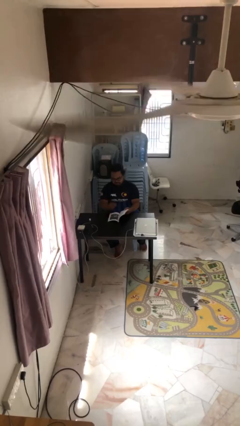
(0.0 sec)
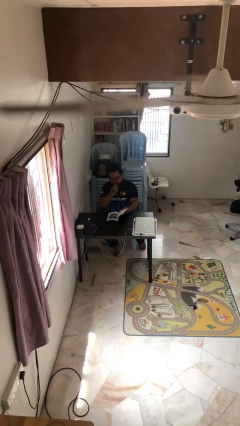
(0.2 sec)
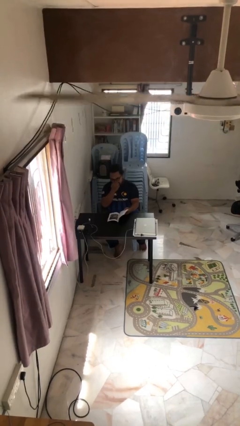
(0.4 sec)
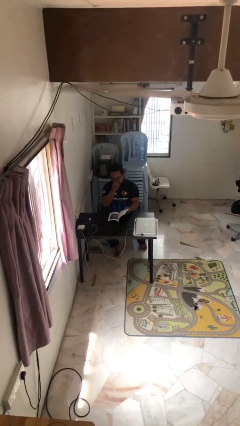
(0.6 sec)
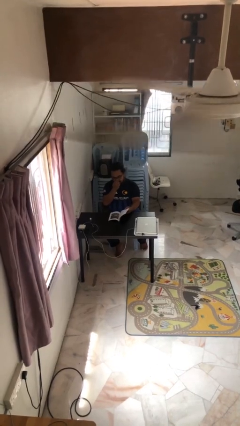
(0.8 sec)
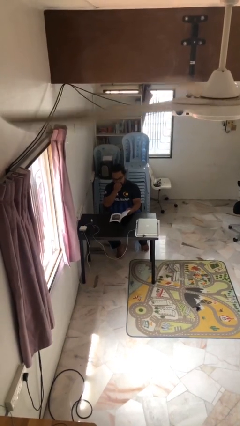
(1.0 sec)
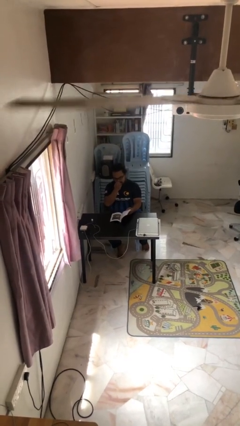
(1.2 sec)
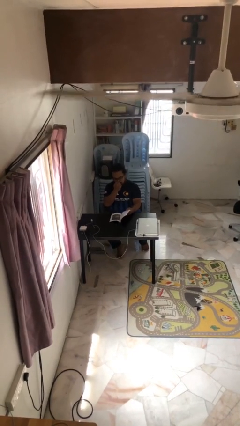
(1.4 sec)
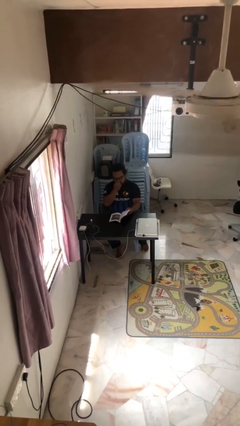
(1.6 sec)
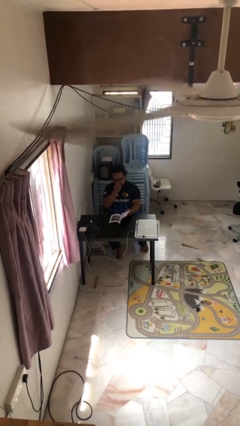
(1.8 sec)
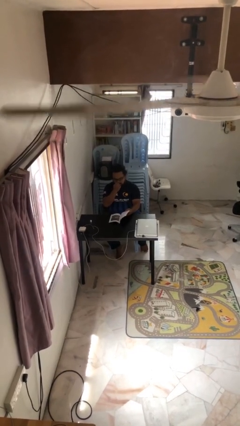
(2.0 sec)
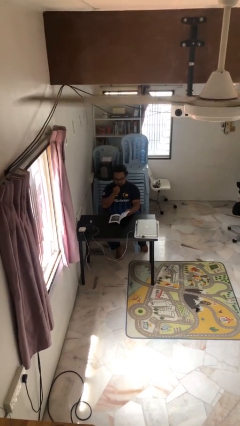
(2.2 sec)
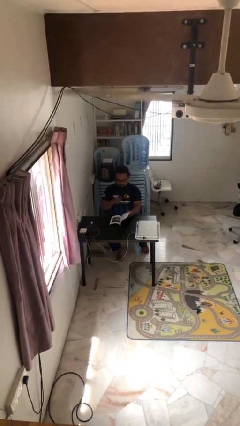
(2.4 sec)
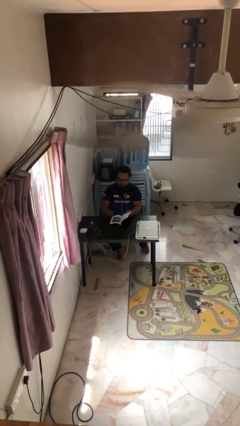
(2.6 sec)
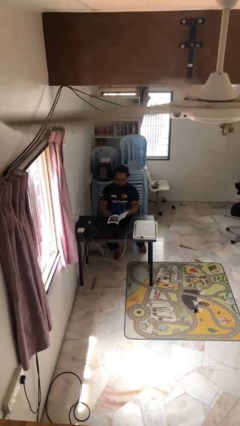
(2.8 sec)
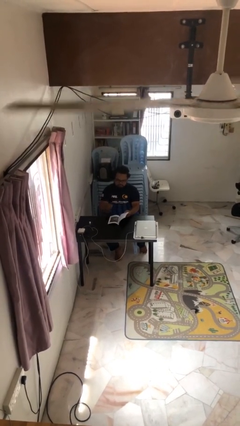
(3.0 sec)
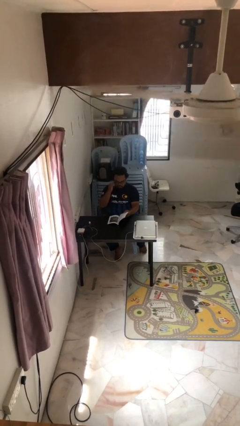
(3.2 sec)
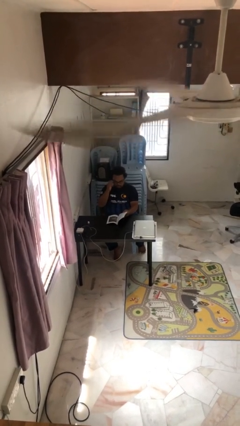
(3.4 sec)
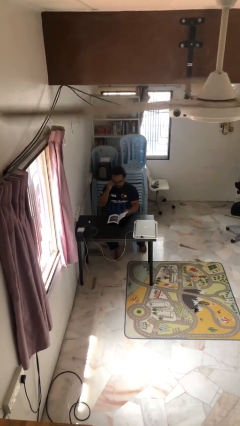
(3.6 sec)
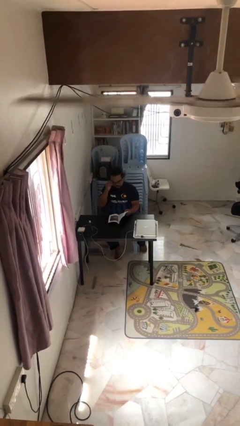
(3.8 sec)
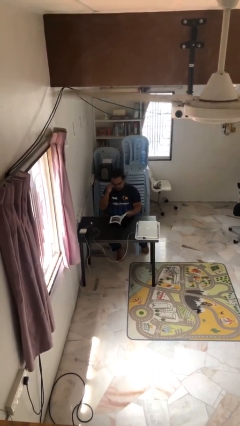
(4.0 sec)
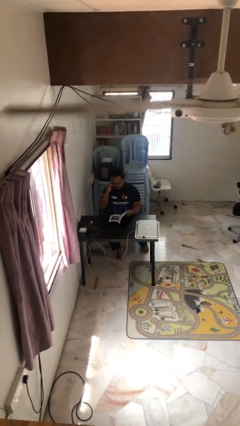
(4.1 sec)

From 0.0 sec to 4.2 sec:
person reads document

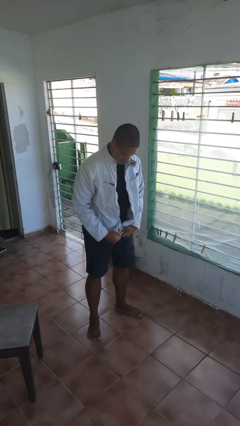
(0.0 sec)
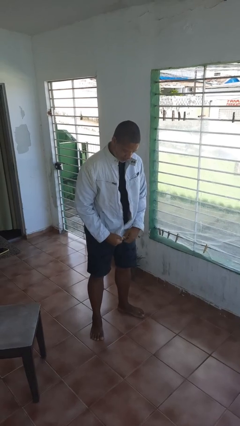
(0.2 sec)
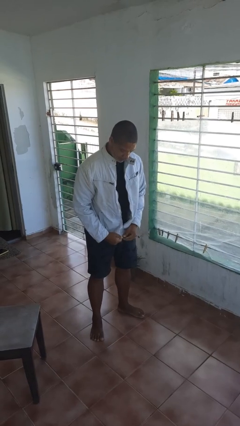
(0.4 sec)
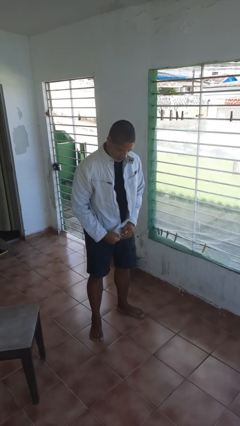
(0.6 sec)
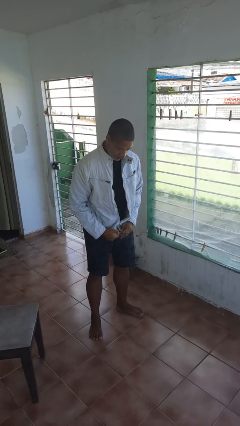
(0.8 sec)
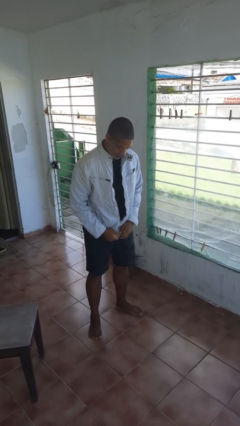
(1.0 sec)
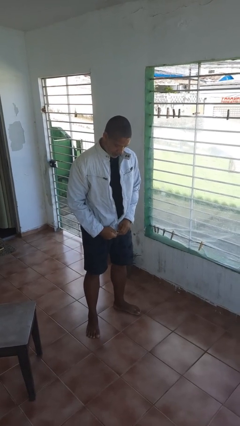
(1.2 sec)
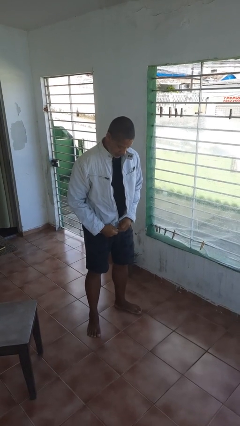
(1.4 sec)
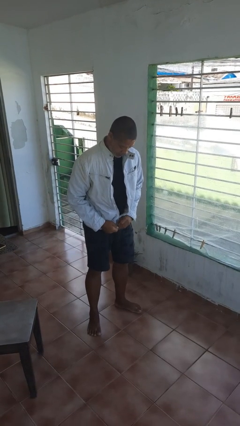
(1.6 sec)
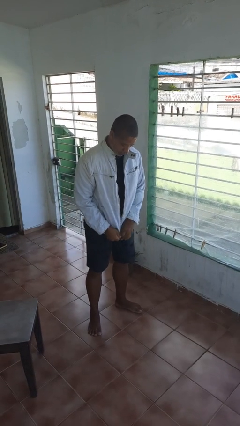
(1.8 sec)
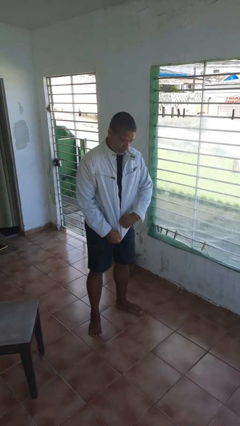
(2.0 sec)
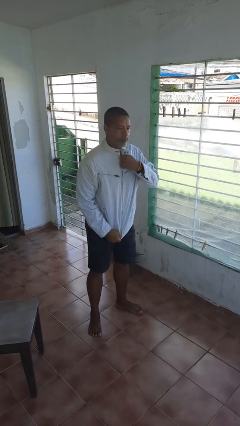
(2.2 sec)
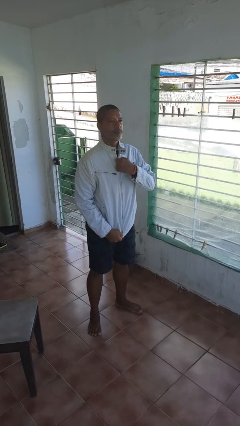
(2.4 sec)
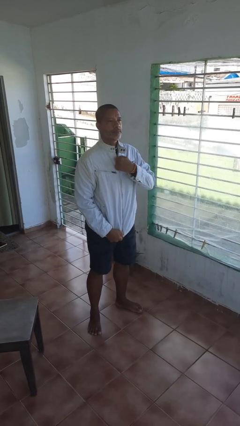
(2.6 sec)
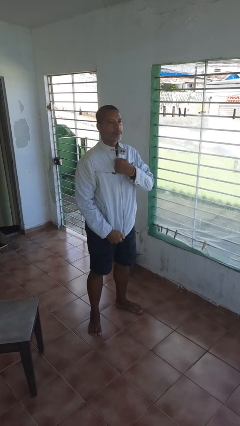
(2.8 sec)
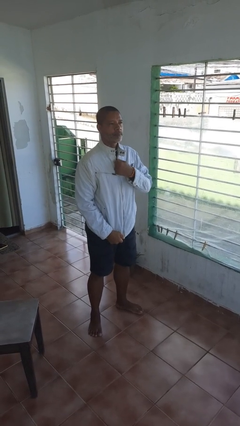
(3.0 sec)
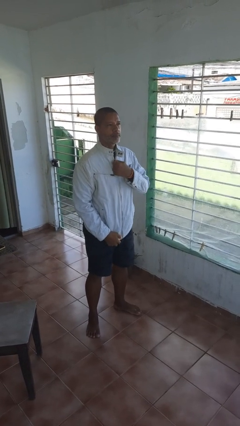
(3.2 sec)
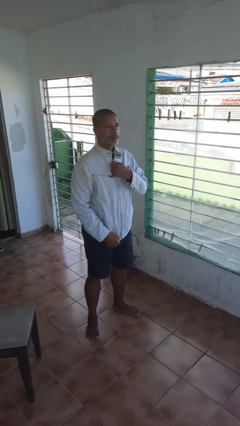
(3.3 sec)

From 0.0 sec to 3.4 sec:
person zips up jacket

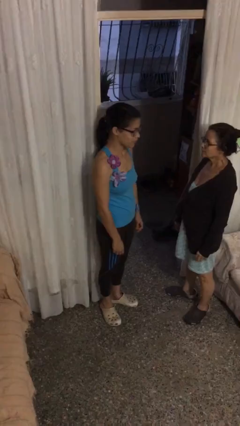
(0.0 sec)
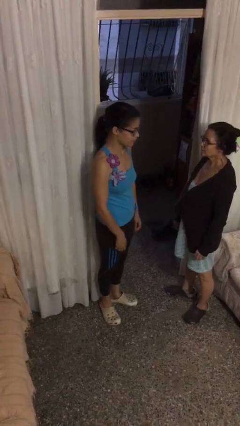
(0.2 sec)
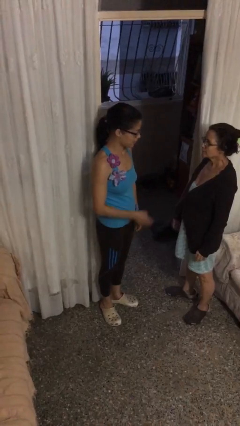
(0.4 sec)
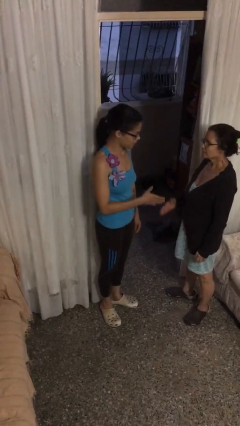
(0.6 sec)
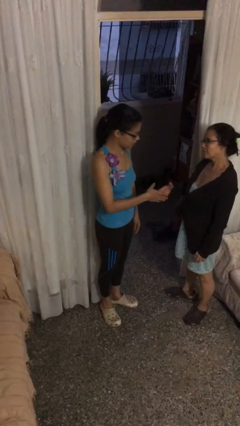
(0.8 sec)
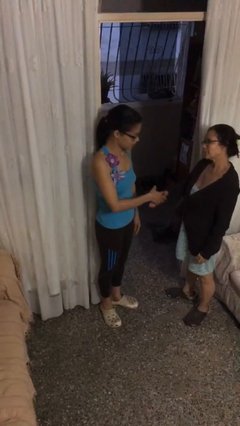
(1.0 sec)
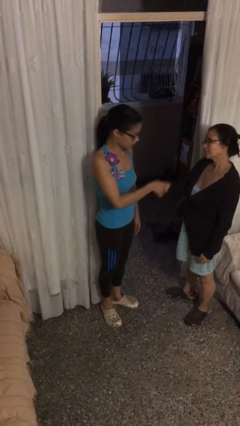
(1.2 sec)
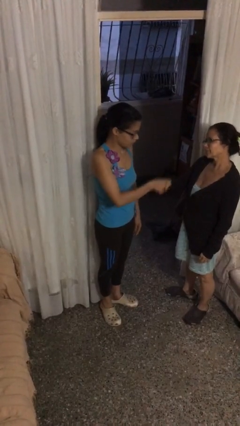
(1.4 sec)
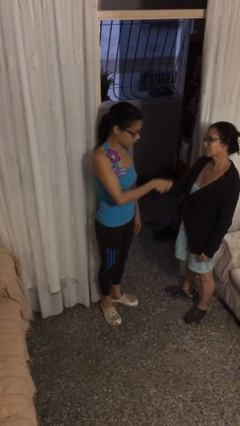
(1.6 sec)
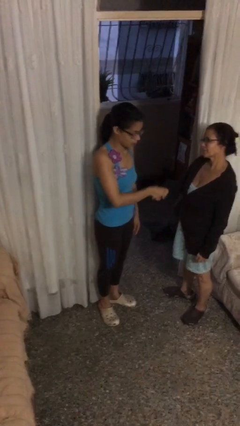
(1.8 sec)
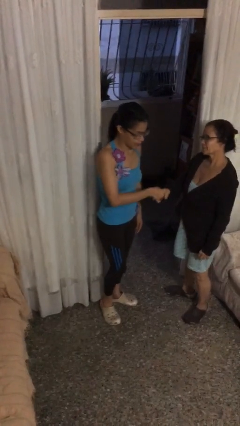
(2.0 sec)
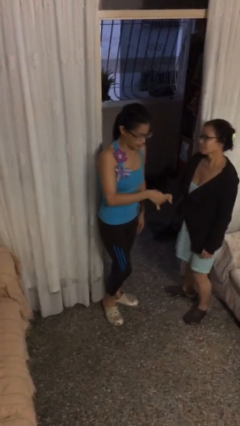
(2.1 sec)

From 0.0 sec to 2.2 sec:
person shakes hand

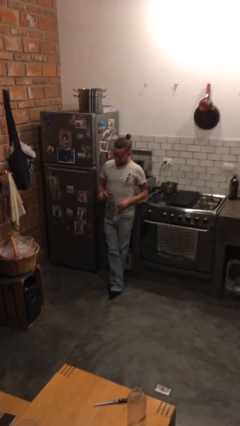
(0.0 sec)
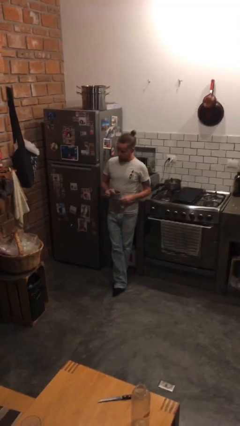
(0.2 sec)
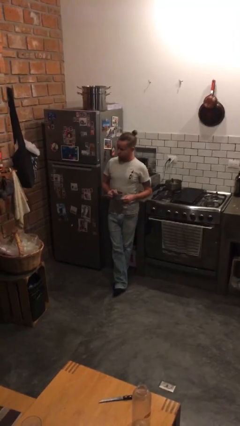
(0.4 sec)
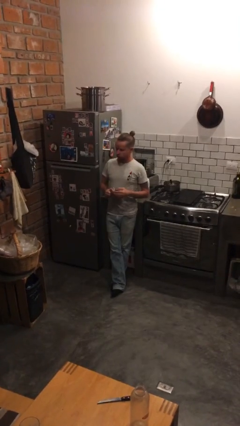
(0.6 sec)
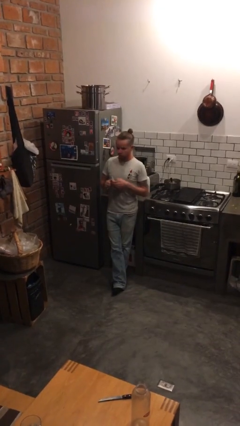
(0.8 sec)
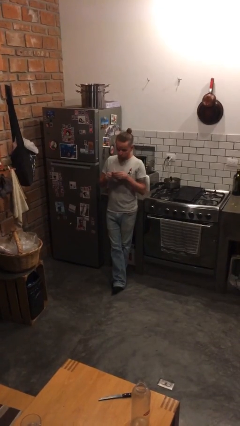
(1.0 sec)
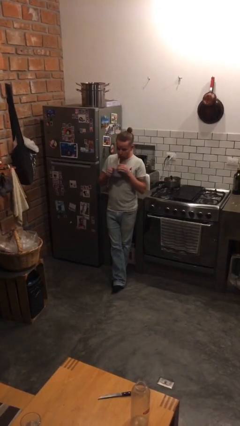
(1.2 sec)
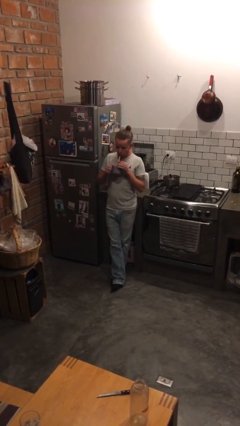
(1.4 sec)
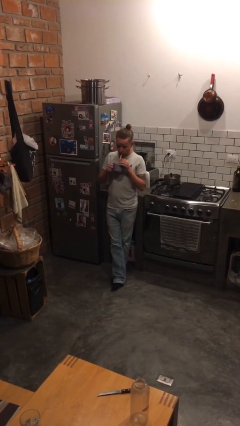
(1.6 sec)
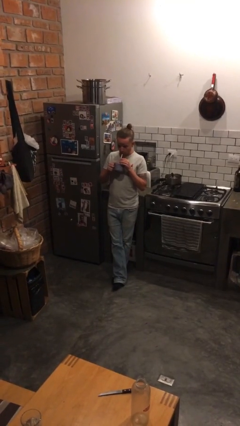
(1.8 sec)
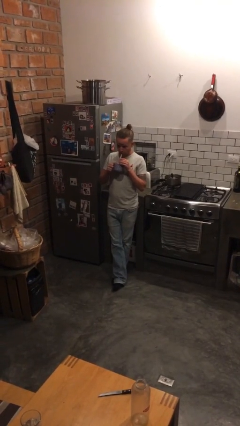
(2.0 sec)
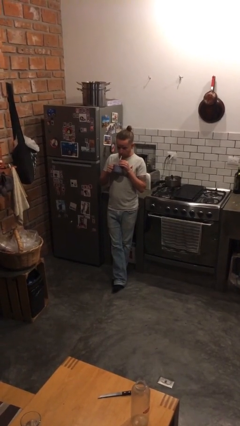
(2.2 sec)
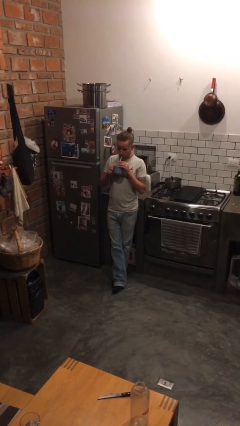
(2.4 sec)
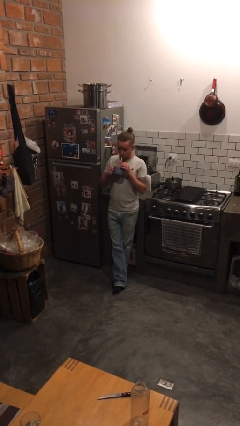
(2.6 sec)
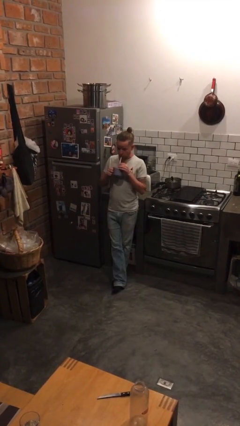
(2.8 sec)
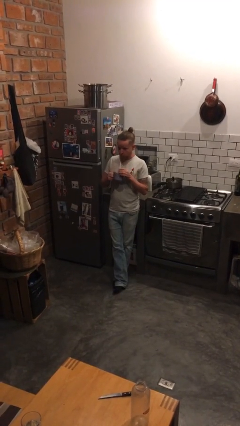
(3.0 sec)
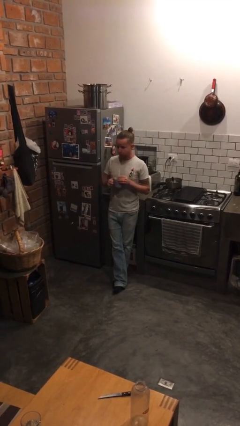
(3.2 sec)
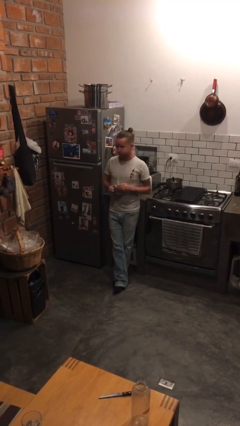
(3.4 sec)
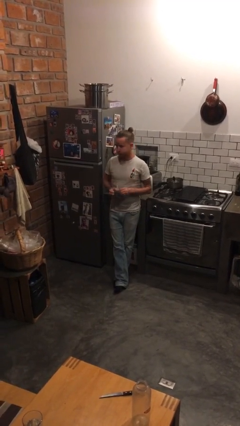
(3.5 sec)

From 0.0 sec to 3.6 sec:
person drinks from straw

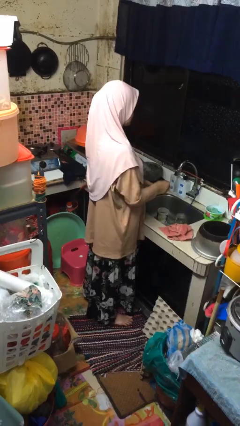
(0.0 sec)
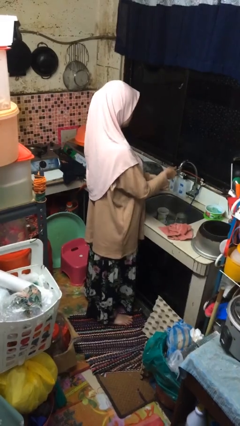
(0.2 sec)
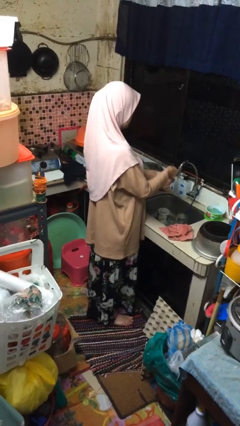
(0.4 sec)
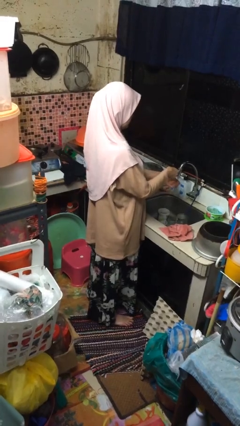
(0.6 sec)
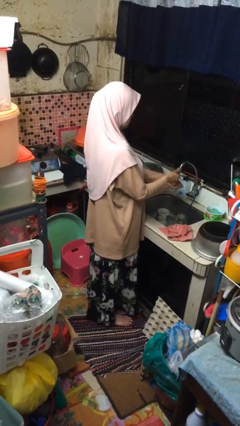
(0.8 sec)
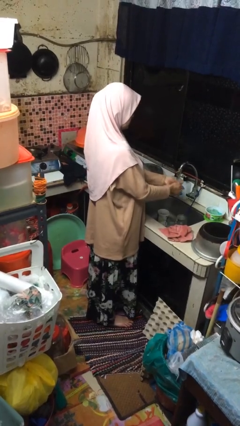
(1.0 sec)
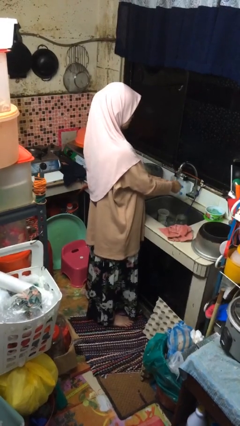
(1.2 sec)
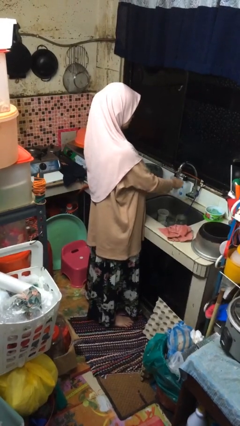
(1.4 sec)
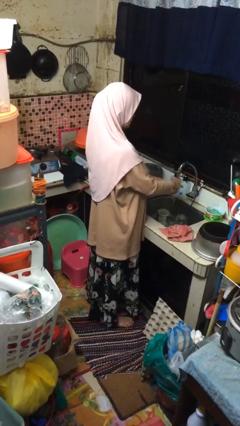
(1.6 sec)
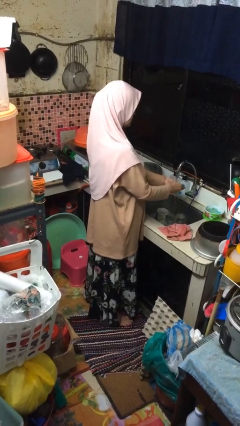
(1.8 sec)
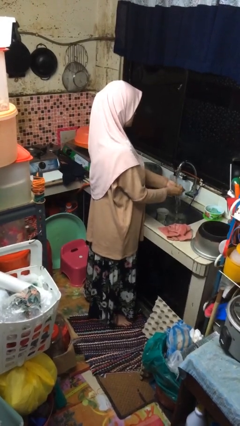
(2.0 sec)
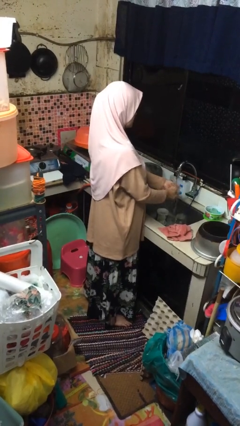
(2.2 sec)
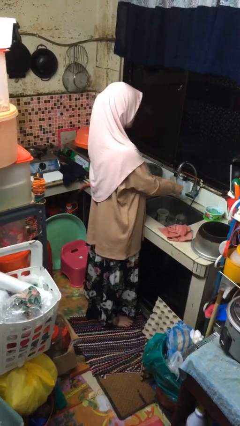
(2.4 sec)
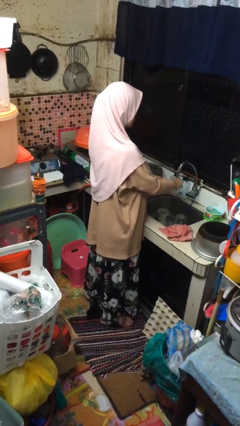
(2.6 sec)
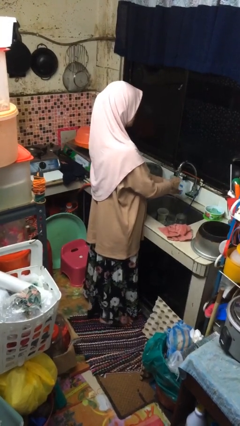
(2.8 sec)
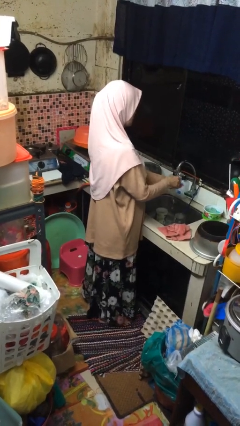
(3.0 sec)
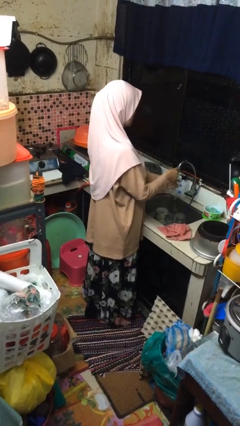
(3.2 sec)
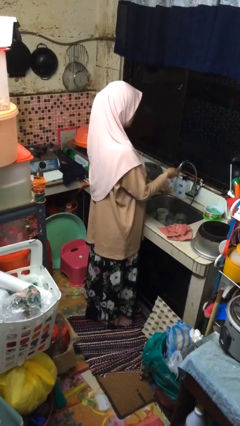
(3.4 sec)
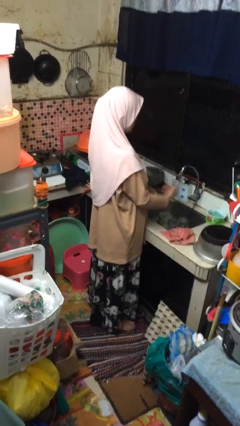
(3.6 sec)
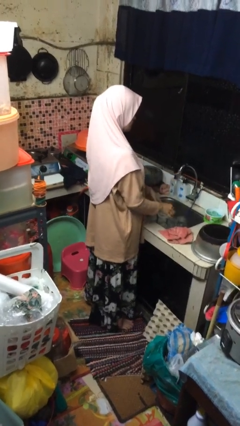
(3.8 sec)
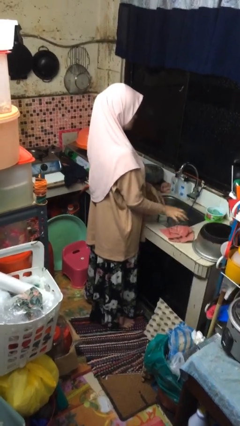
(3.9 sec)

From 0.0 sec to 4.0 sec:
person washes hands
